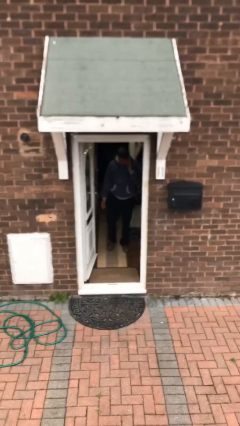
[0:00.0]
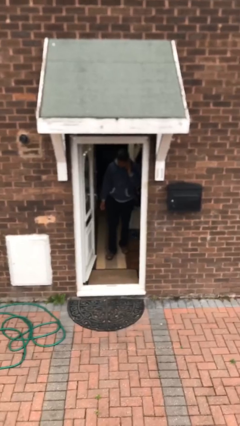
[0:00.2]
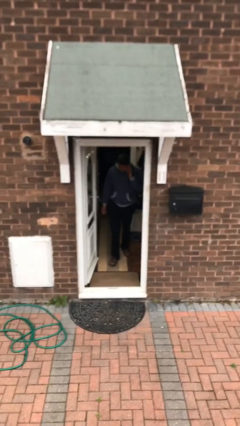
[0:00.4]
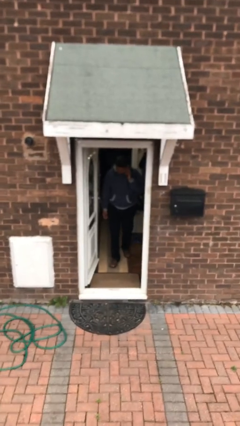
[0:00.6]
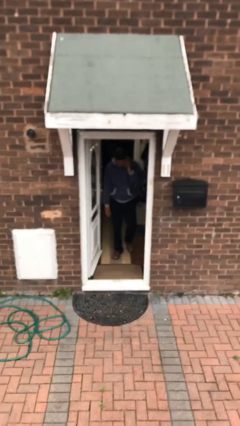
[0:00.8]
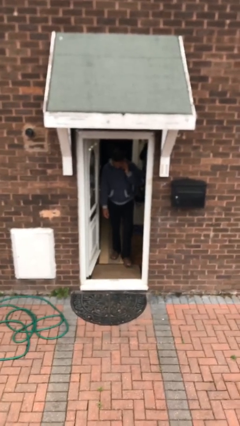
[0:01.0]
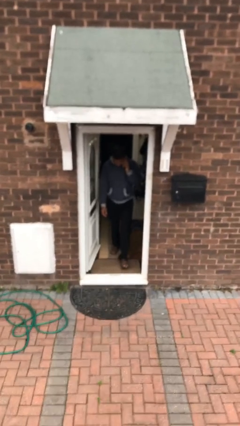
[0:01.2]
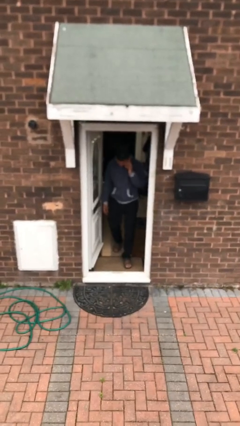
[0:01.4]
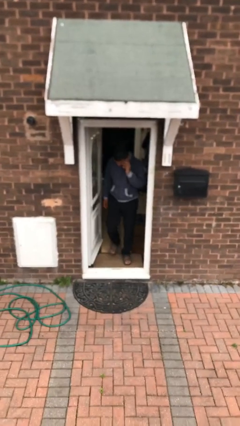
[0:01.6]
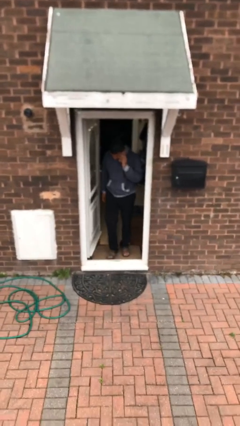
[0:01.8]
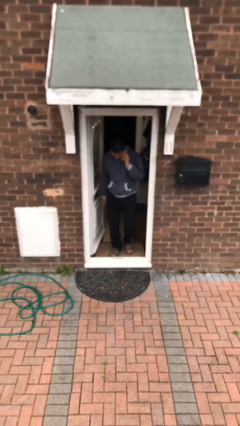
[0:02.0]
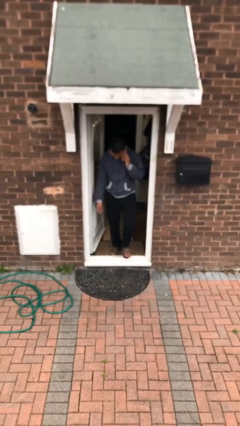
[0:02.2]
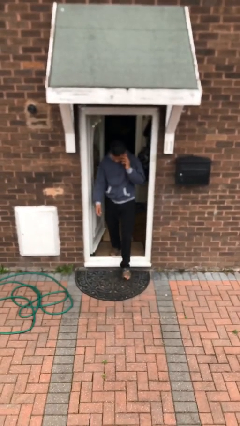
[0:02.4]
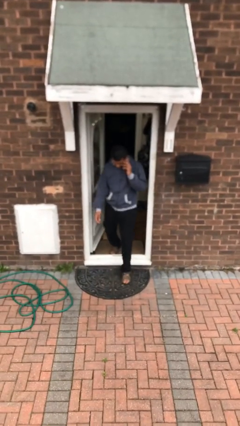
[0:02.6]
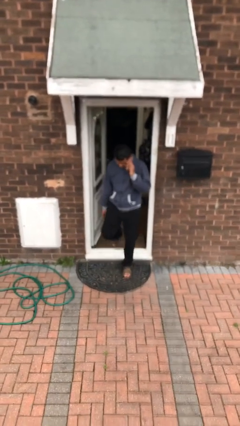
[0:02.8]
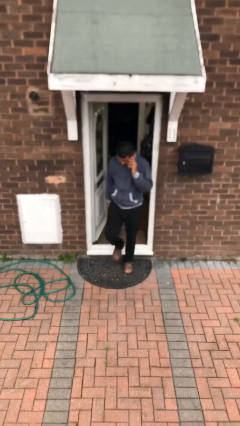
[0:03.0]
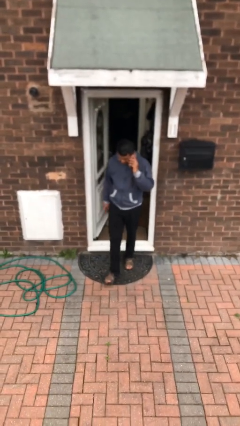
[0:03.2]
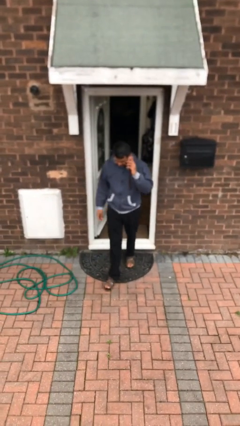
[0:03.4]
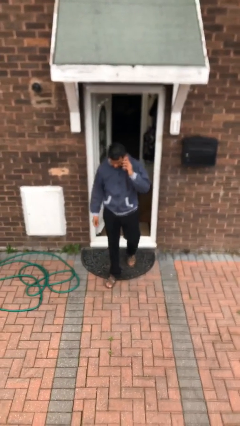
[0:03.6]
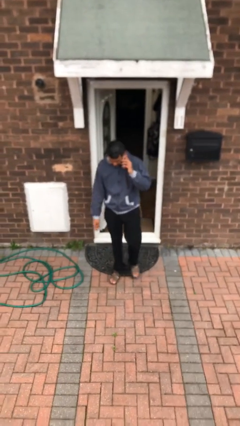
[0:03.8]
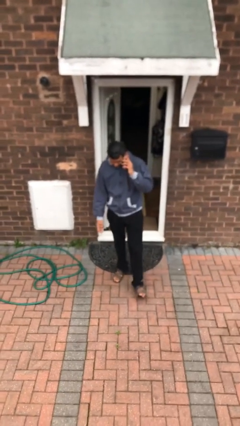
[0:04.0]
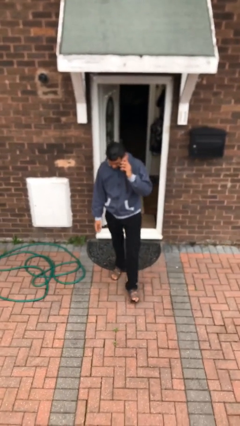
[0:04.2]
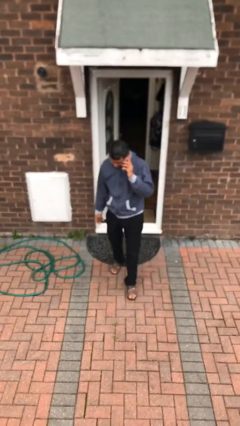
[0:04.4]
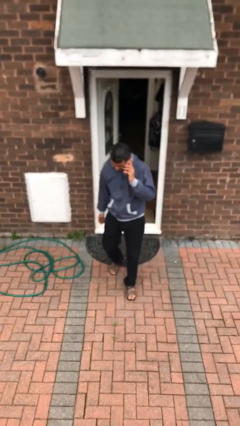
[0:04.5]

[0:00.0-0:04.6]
person enters scene through structure

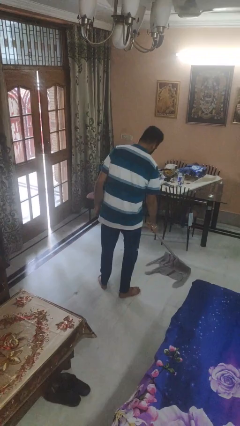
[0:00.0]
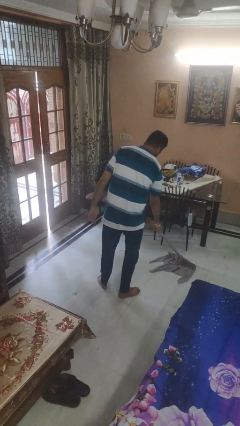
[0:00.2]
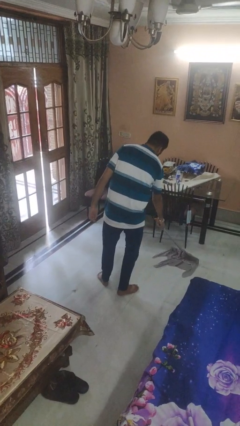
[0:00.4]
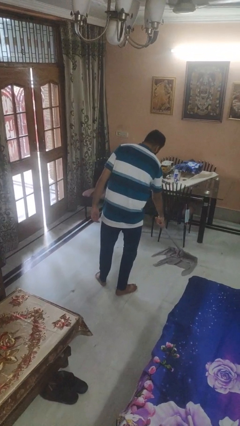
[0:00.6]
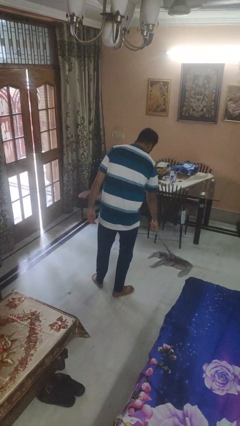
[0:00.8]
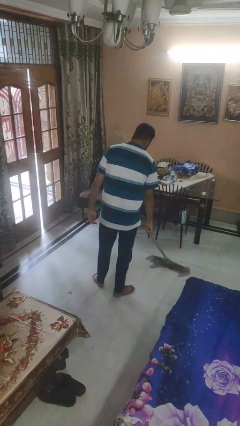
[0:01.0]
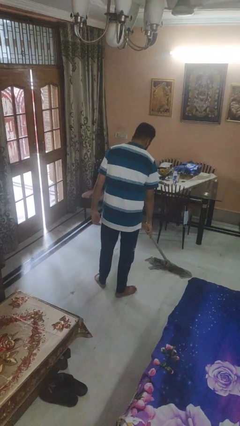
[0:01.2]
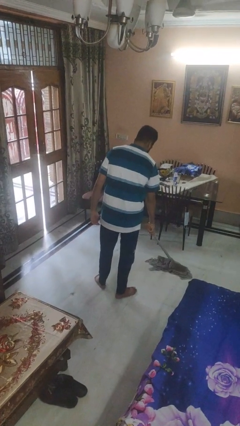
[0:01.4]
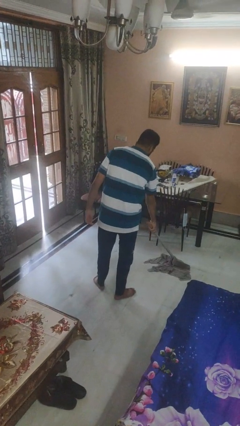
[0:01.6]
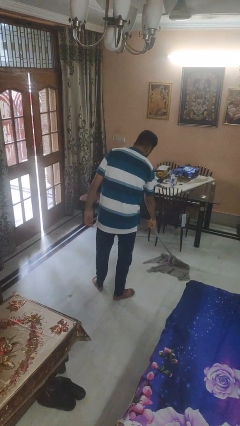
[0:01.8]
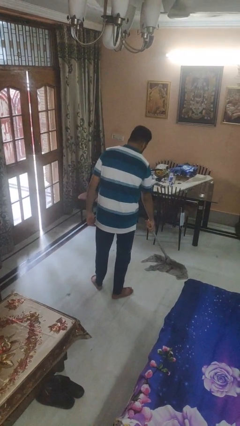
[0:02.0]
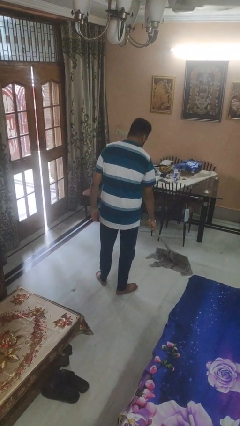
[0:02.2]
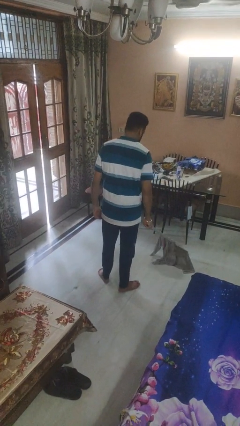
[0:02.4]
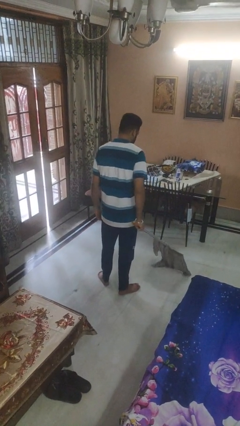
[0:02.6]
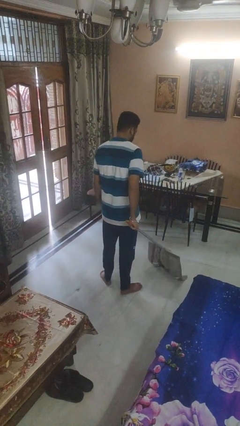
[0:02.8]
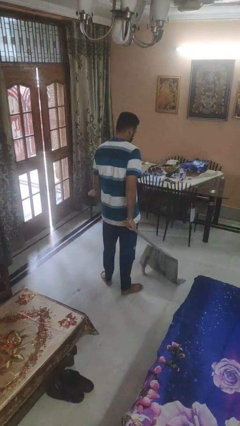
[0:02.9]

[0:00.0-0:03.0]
person mops

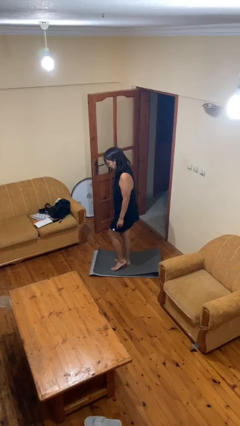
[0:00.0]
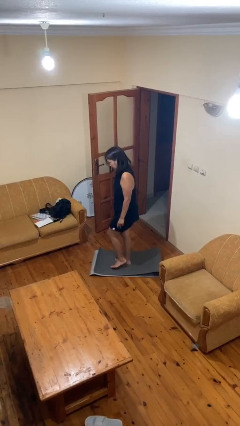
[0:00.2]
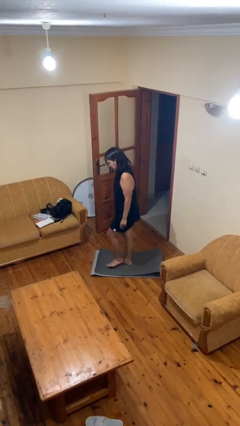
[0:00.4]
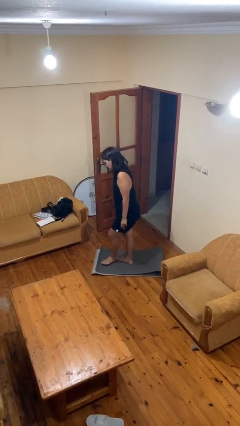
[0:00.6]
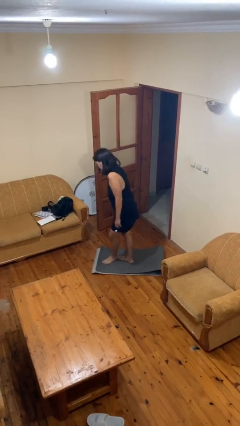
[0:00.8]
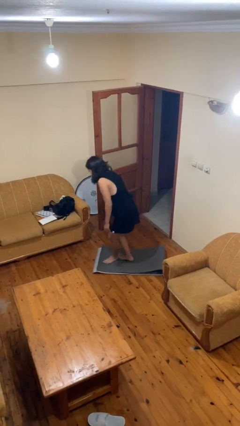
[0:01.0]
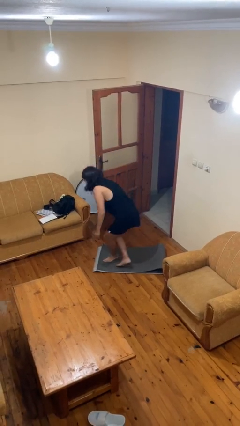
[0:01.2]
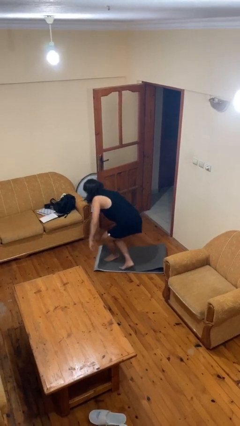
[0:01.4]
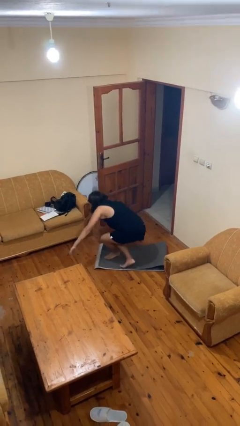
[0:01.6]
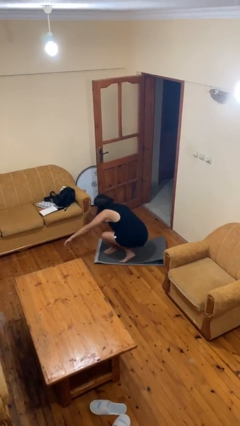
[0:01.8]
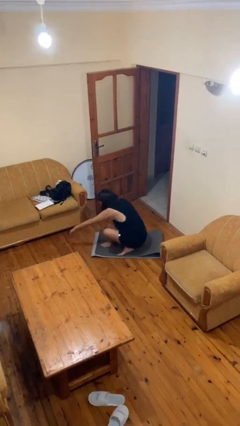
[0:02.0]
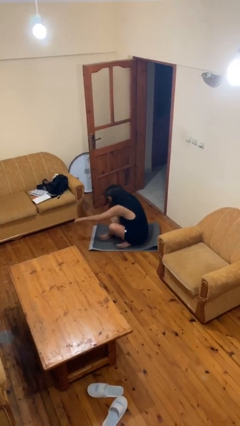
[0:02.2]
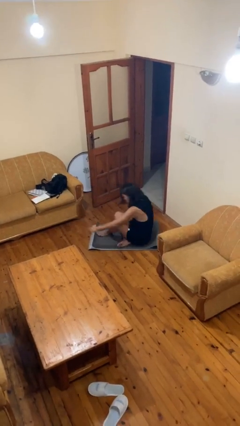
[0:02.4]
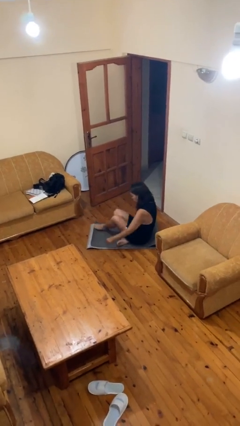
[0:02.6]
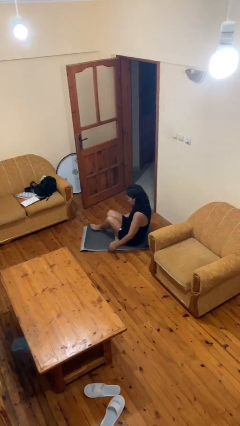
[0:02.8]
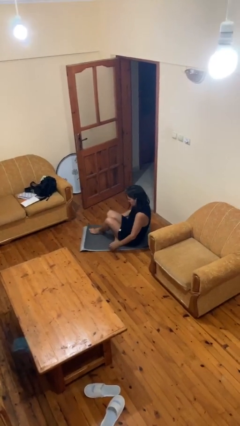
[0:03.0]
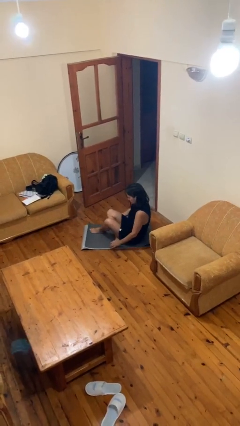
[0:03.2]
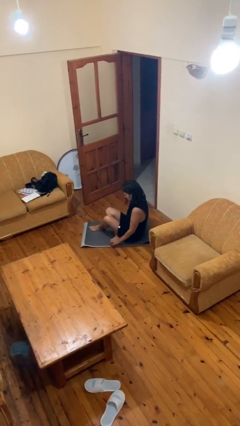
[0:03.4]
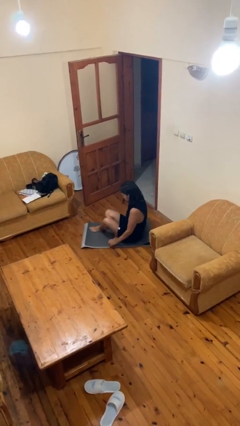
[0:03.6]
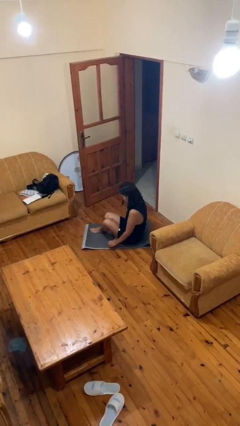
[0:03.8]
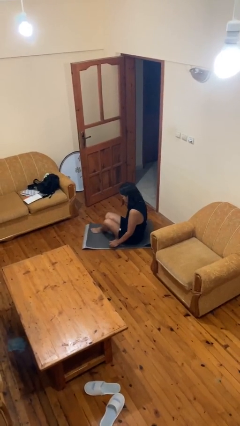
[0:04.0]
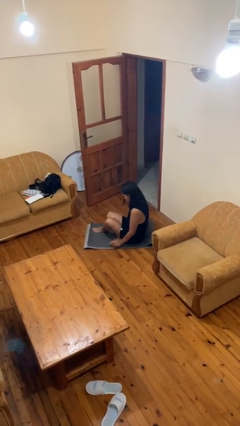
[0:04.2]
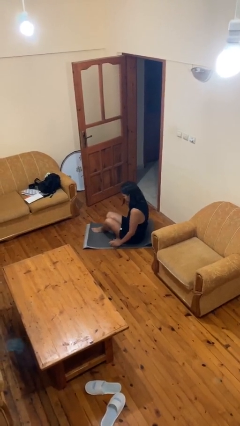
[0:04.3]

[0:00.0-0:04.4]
person sits crisscross

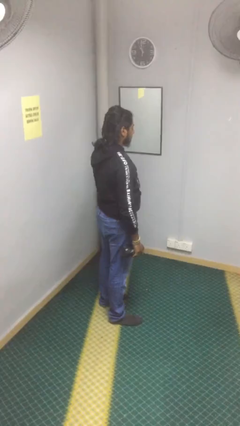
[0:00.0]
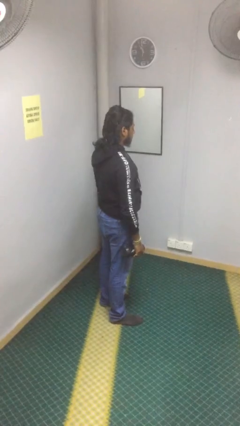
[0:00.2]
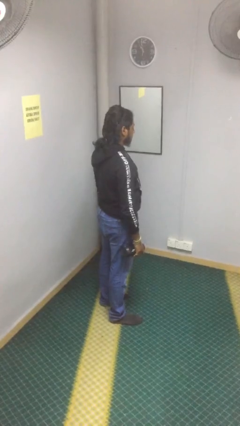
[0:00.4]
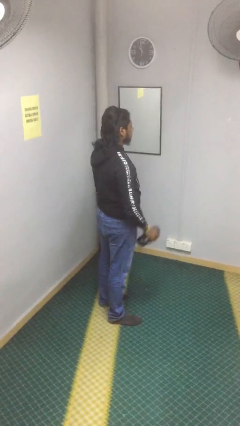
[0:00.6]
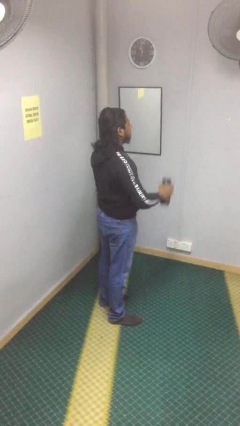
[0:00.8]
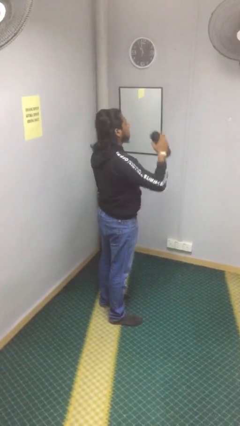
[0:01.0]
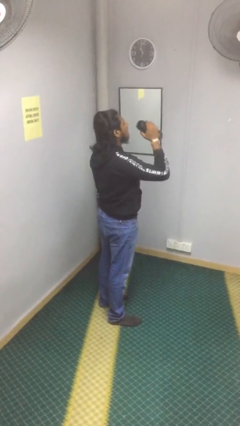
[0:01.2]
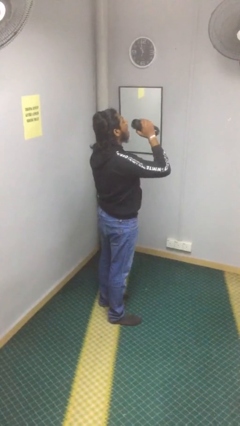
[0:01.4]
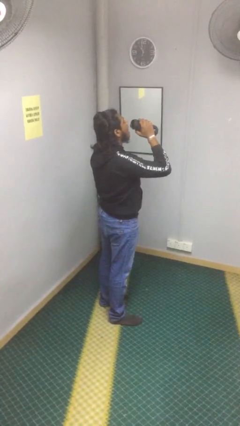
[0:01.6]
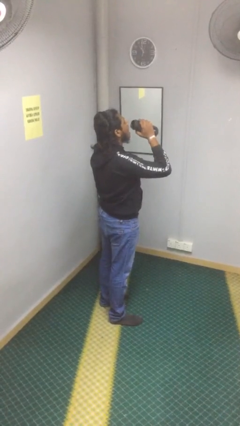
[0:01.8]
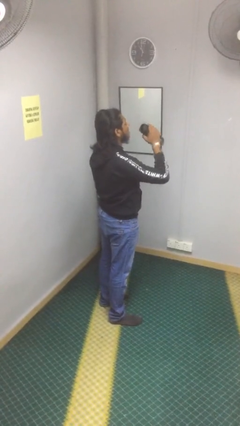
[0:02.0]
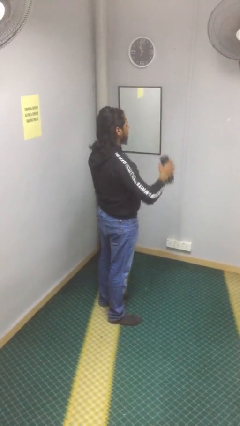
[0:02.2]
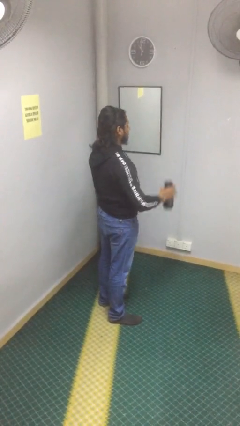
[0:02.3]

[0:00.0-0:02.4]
person drinks from bottle

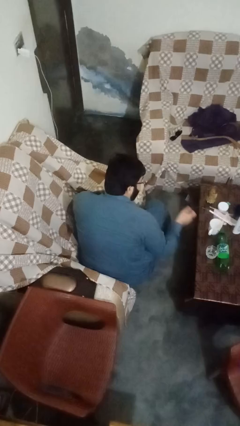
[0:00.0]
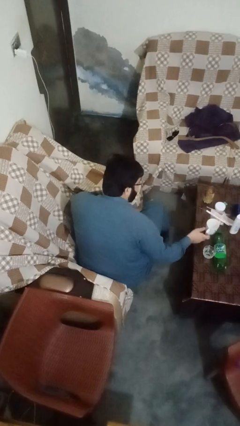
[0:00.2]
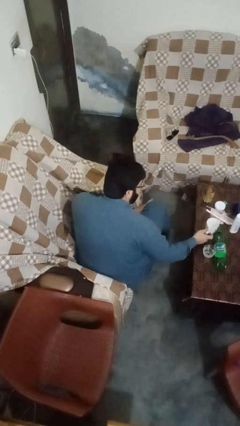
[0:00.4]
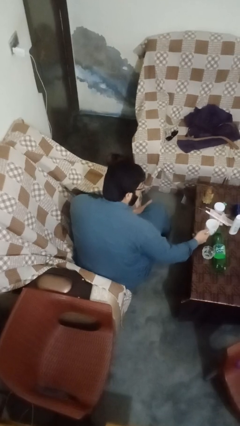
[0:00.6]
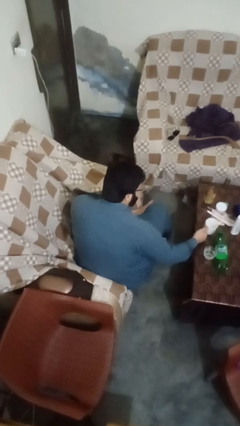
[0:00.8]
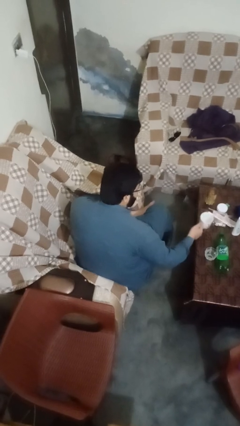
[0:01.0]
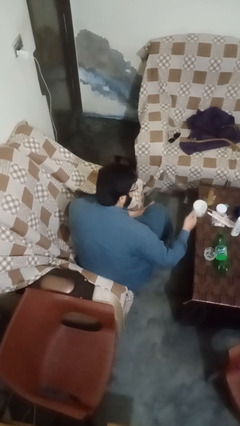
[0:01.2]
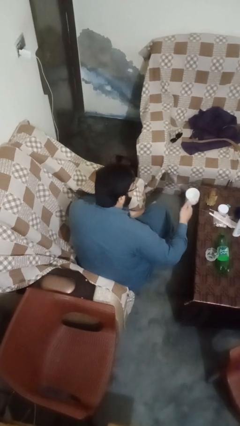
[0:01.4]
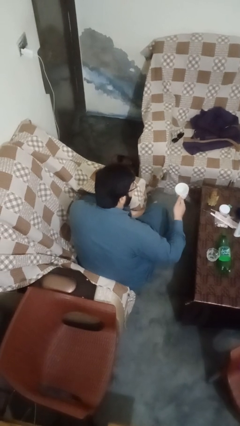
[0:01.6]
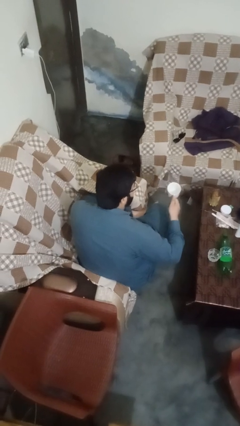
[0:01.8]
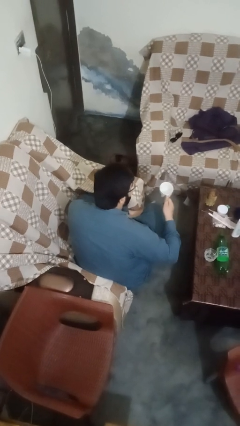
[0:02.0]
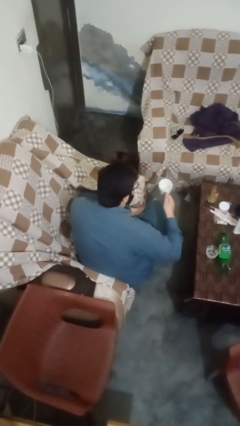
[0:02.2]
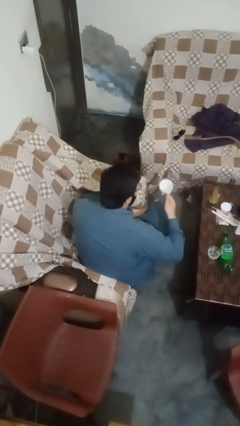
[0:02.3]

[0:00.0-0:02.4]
person picks up object from table

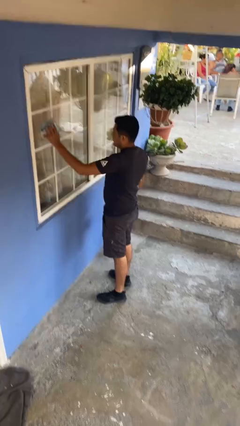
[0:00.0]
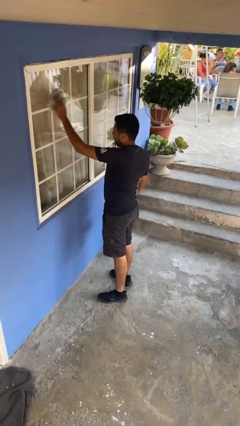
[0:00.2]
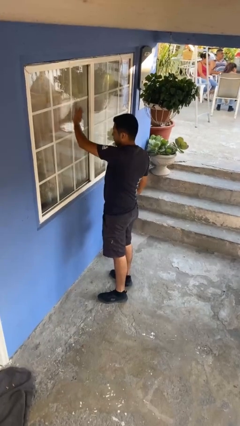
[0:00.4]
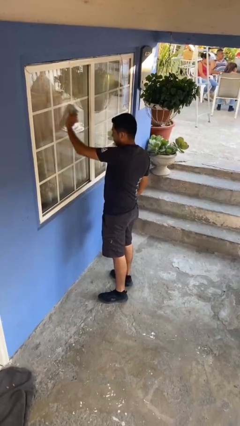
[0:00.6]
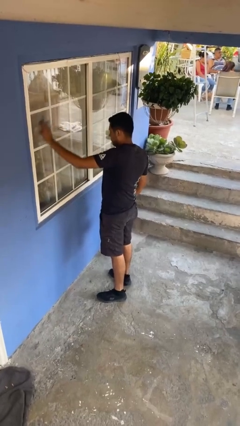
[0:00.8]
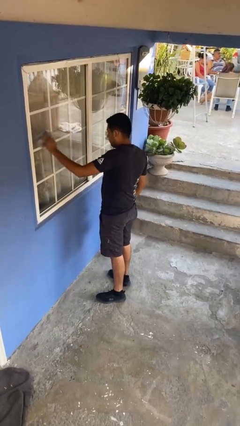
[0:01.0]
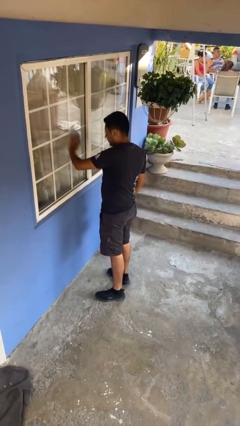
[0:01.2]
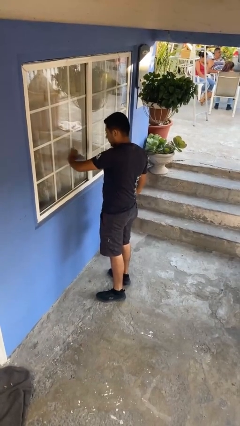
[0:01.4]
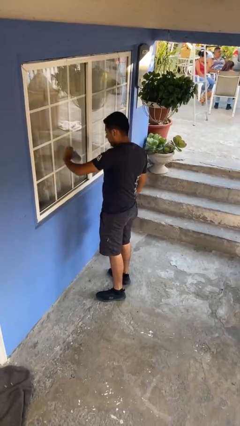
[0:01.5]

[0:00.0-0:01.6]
person washes window
